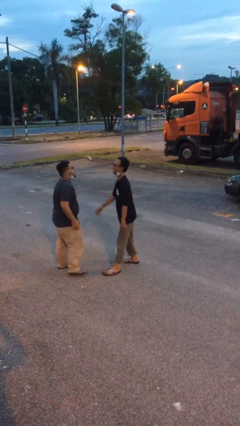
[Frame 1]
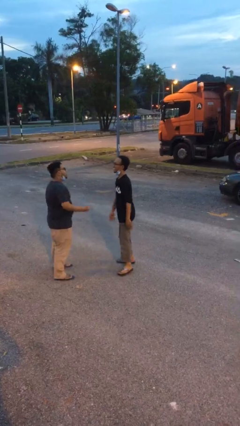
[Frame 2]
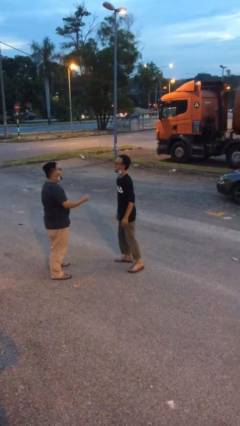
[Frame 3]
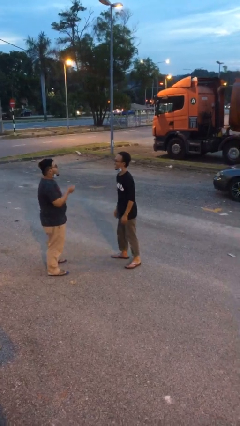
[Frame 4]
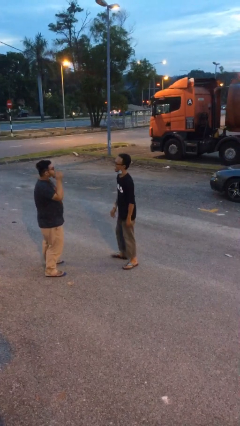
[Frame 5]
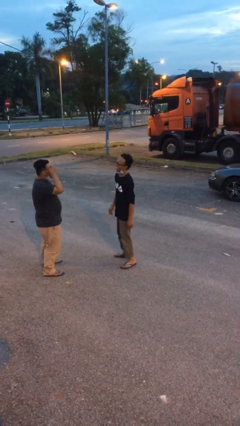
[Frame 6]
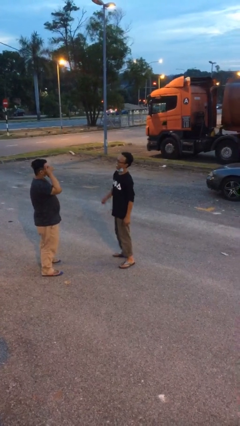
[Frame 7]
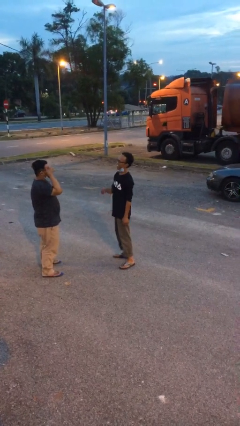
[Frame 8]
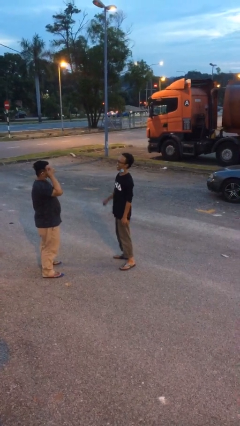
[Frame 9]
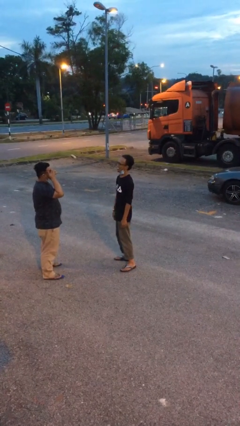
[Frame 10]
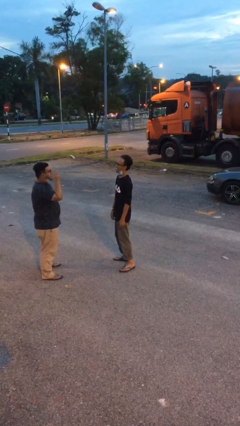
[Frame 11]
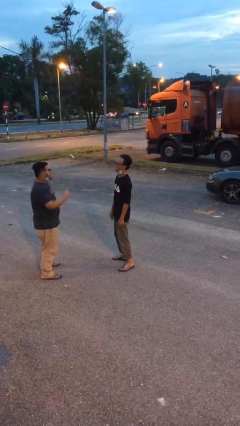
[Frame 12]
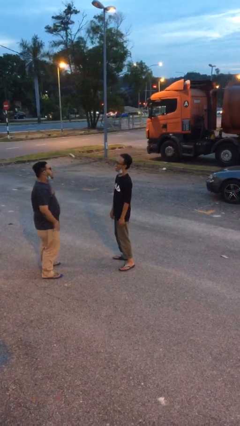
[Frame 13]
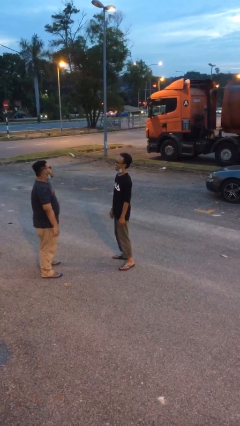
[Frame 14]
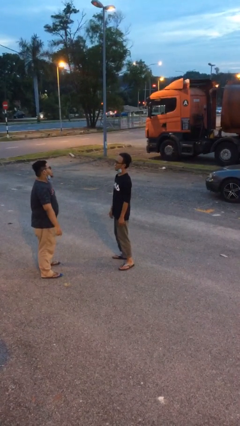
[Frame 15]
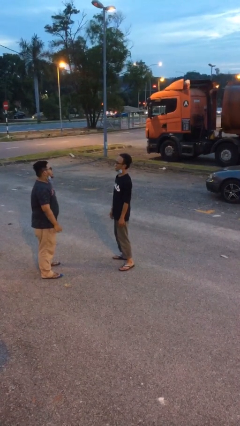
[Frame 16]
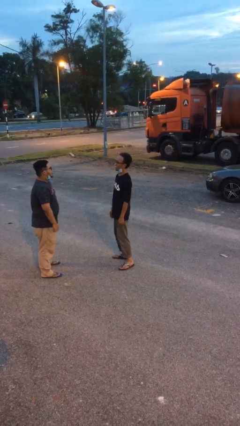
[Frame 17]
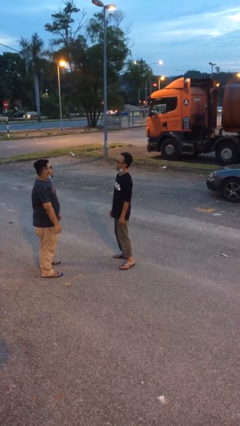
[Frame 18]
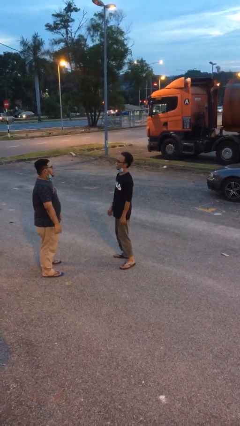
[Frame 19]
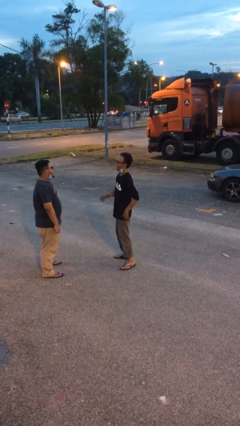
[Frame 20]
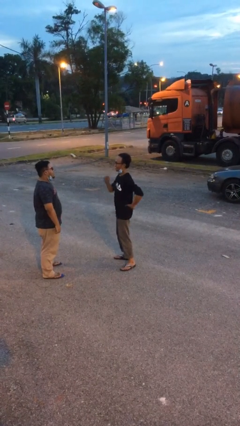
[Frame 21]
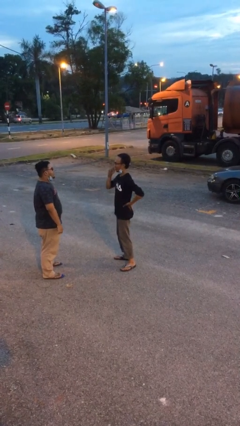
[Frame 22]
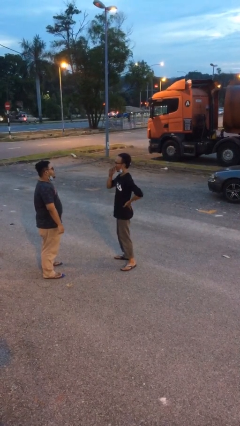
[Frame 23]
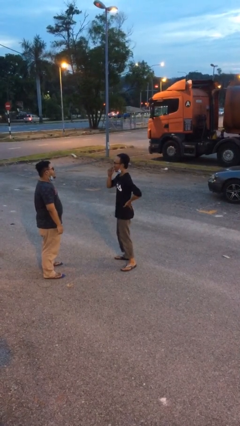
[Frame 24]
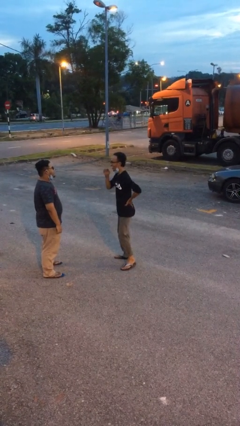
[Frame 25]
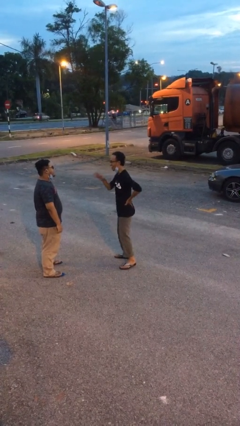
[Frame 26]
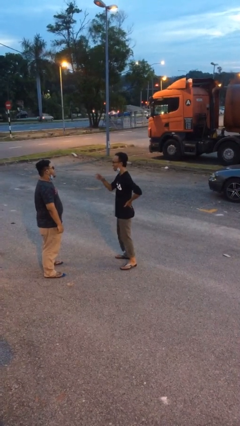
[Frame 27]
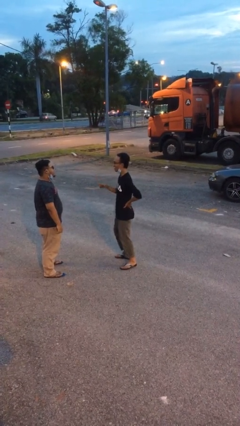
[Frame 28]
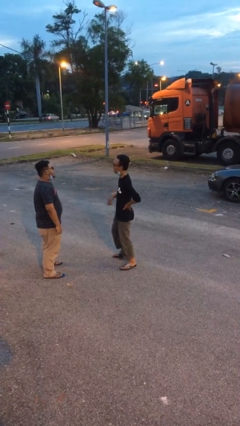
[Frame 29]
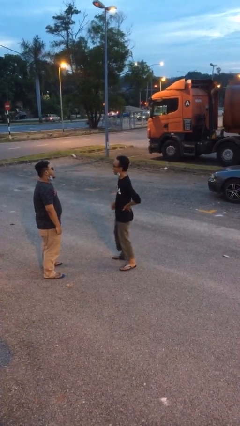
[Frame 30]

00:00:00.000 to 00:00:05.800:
person talks to person

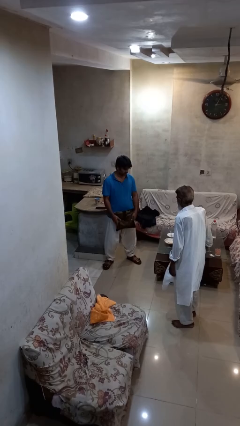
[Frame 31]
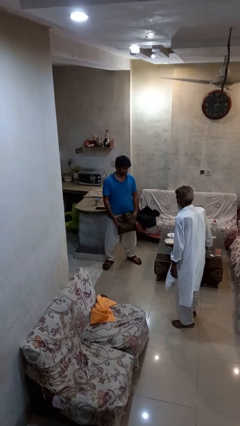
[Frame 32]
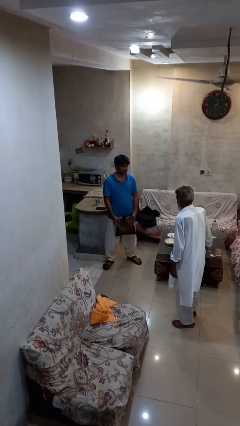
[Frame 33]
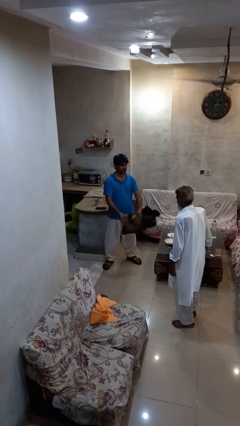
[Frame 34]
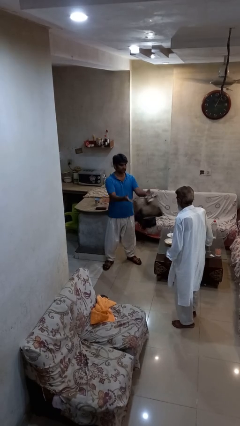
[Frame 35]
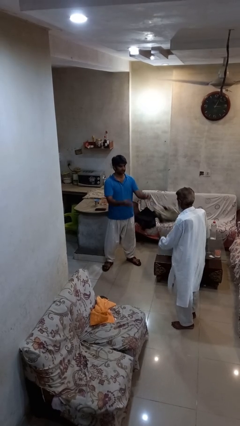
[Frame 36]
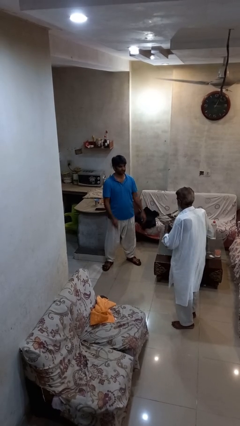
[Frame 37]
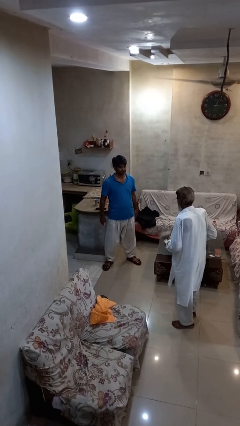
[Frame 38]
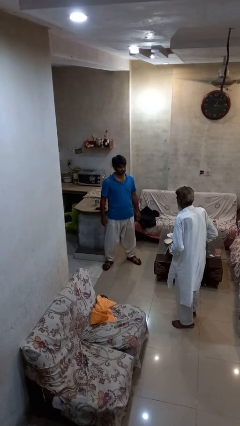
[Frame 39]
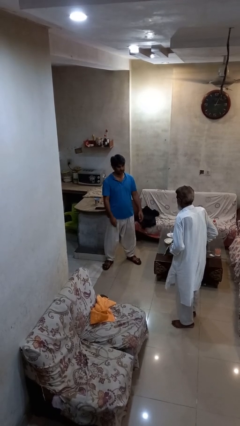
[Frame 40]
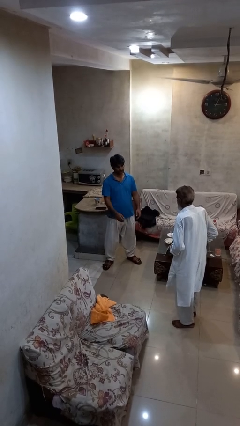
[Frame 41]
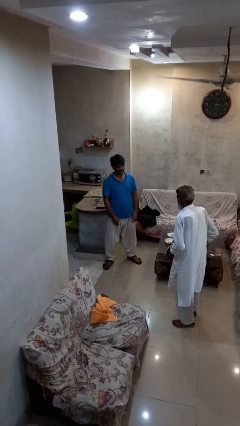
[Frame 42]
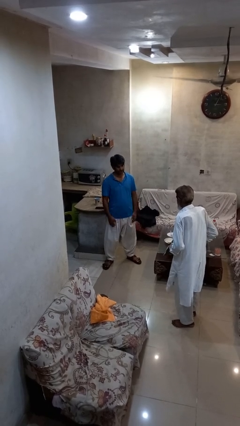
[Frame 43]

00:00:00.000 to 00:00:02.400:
person throws object to person

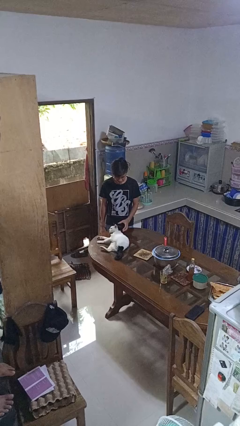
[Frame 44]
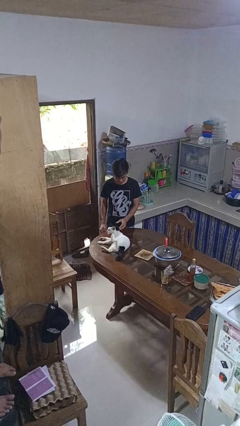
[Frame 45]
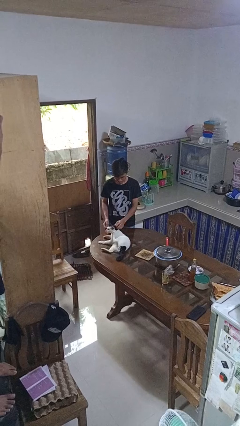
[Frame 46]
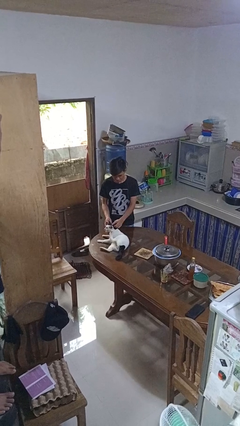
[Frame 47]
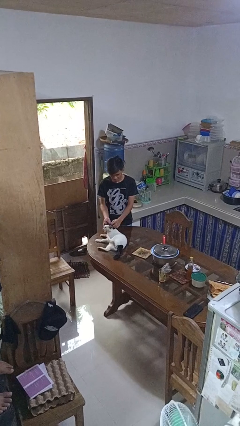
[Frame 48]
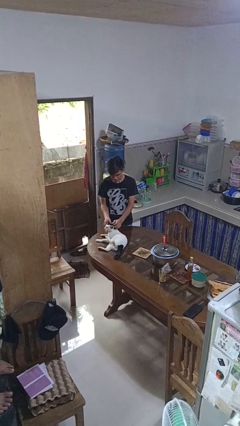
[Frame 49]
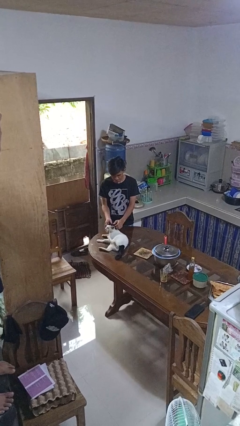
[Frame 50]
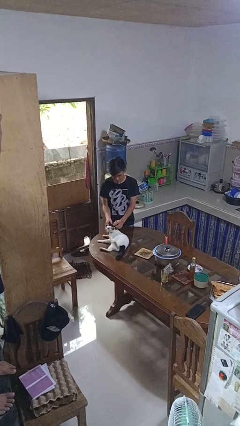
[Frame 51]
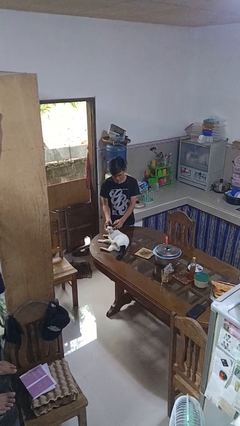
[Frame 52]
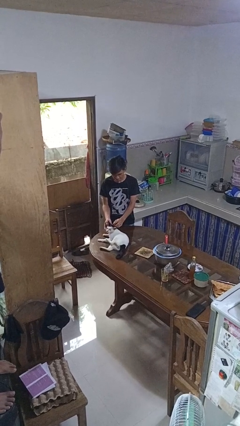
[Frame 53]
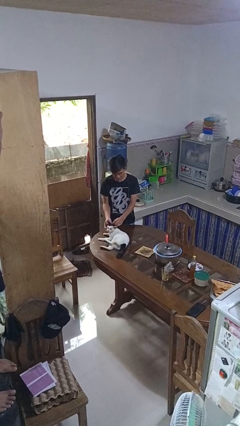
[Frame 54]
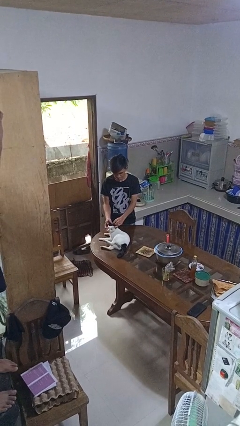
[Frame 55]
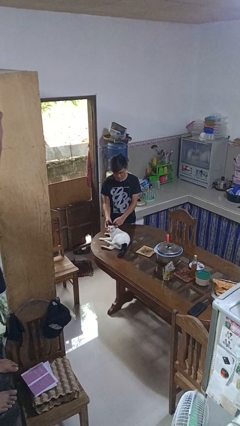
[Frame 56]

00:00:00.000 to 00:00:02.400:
person pets cat

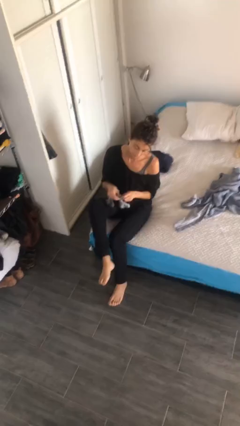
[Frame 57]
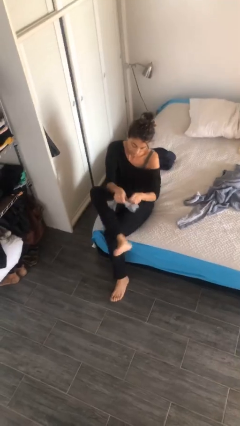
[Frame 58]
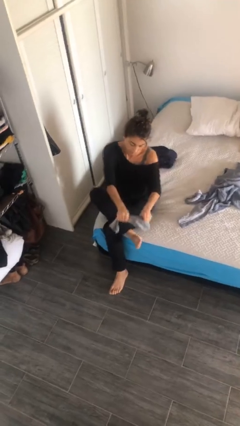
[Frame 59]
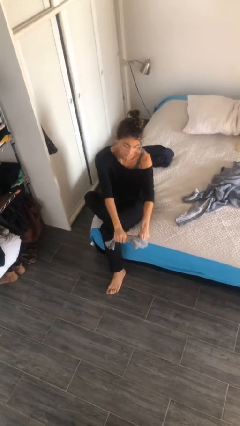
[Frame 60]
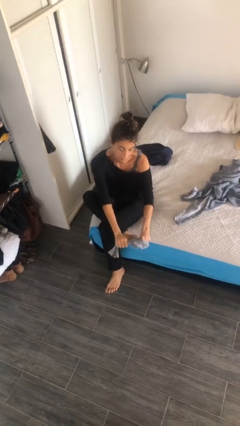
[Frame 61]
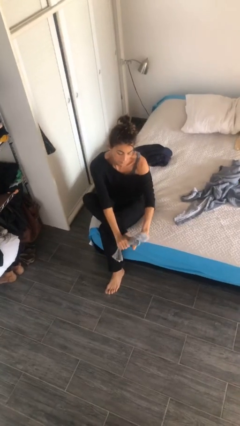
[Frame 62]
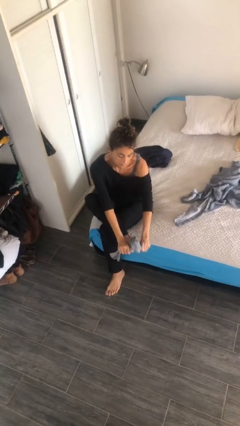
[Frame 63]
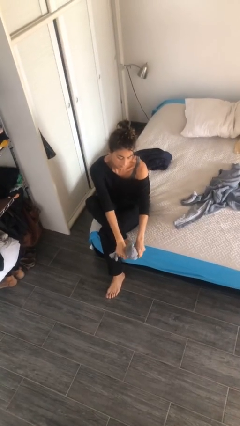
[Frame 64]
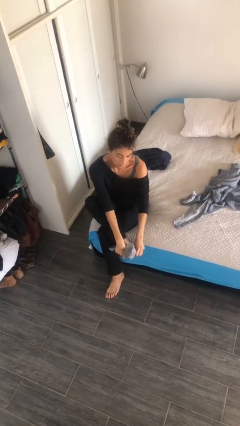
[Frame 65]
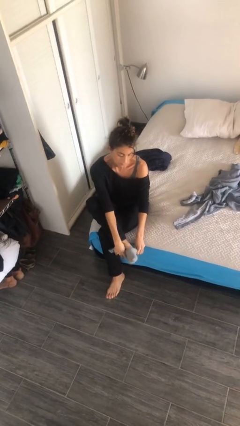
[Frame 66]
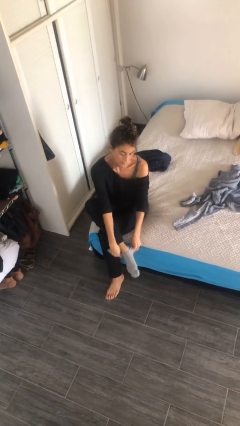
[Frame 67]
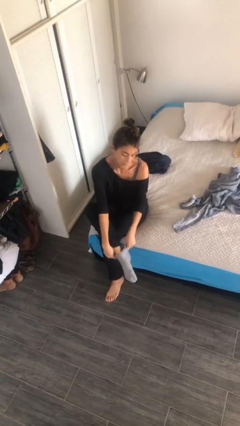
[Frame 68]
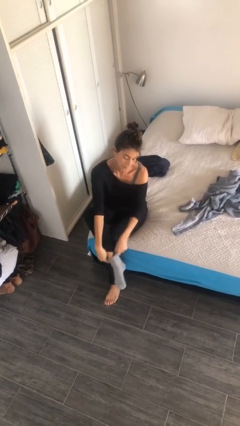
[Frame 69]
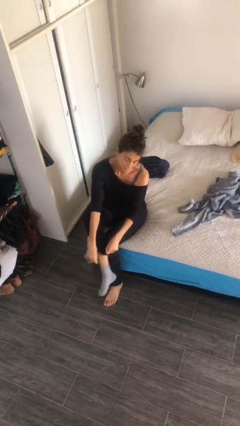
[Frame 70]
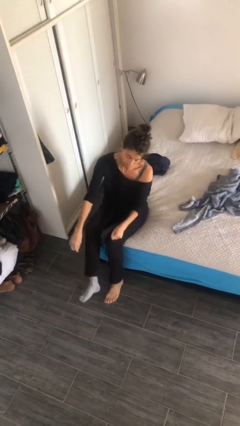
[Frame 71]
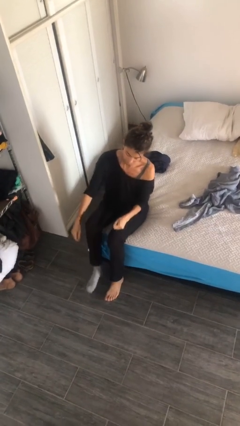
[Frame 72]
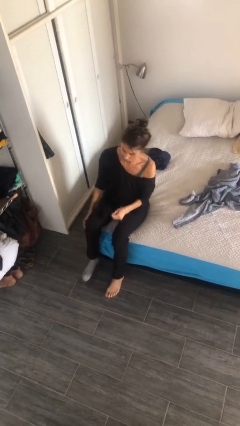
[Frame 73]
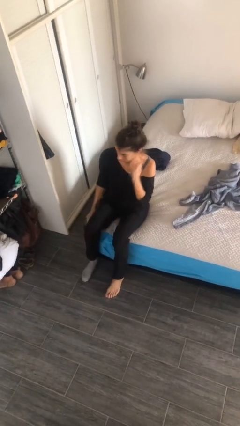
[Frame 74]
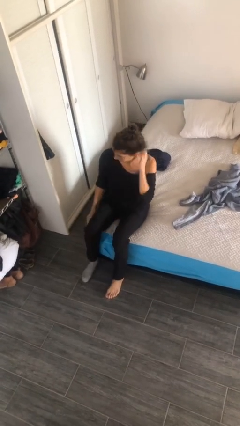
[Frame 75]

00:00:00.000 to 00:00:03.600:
person puts on socks

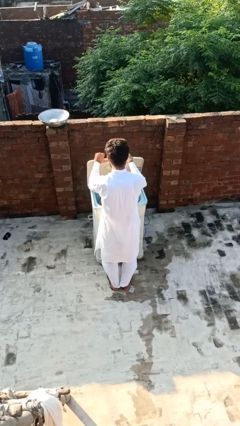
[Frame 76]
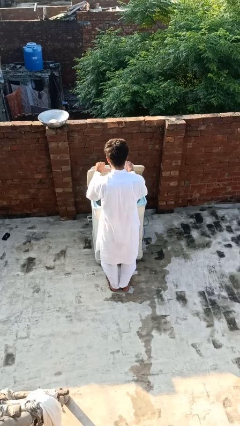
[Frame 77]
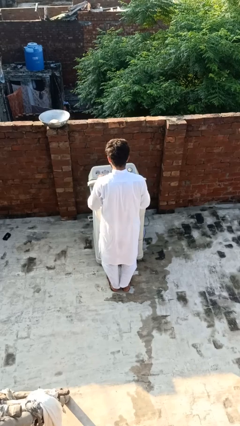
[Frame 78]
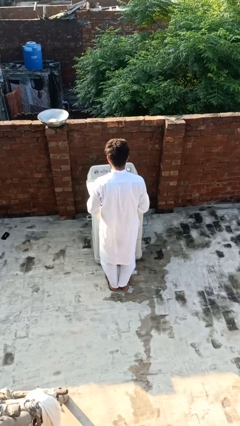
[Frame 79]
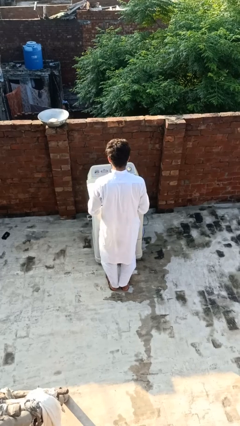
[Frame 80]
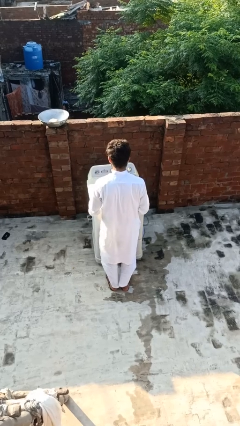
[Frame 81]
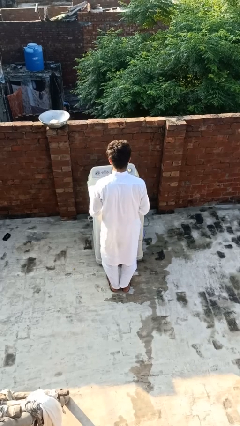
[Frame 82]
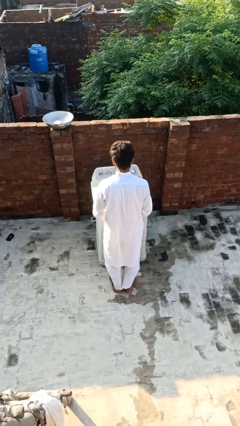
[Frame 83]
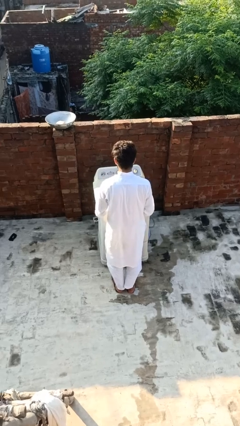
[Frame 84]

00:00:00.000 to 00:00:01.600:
person closes clothes washer

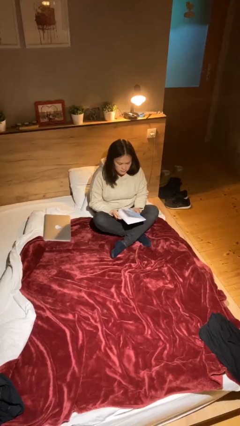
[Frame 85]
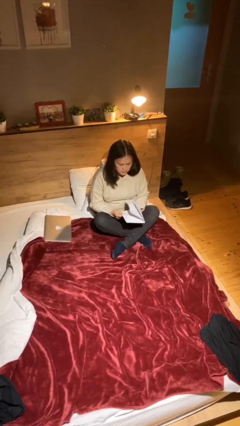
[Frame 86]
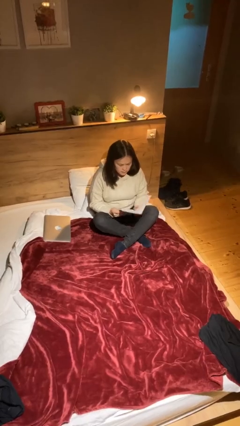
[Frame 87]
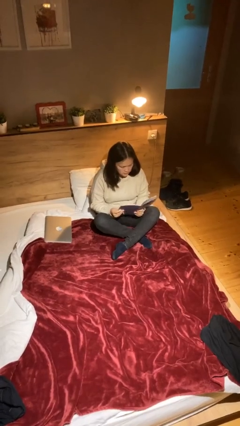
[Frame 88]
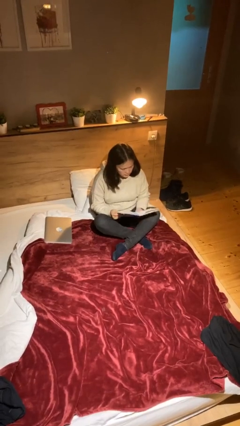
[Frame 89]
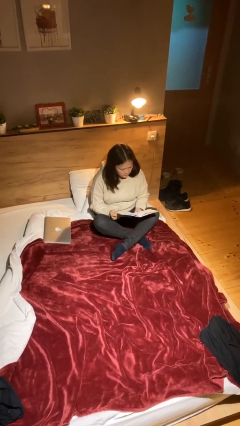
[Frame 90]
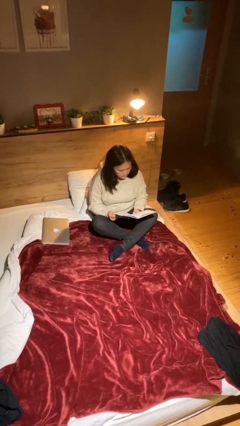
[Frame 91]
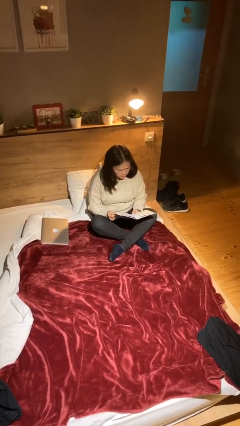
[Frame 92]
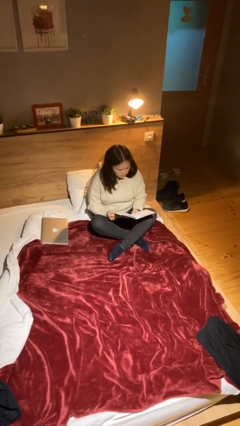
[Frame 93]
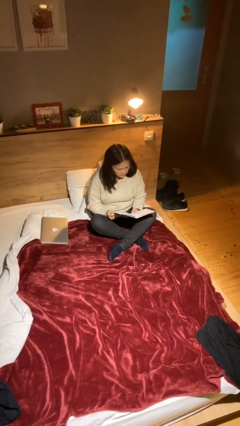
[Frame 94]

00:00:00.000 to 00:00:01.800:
person reads document
